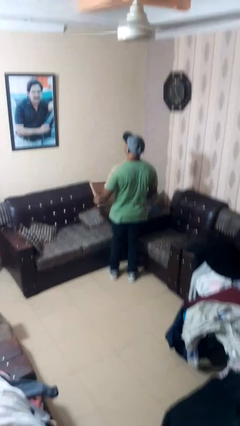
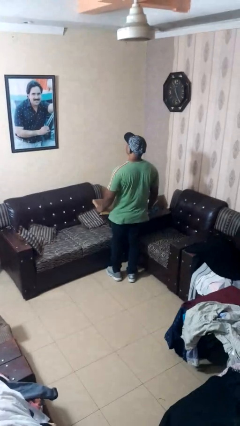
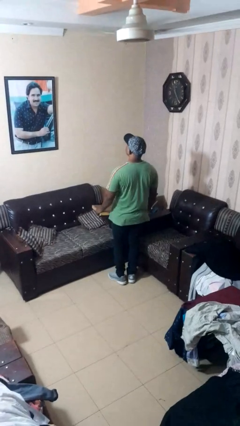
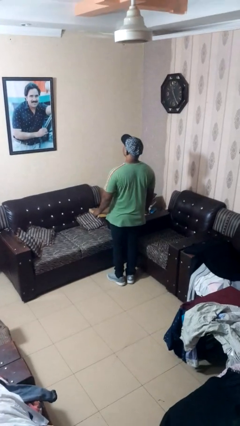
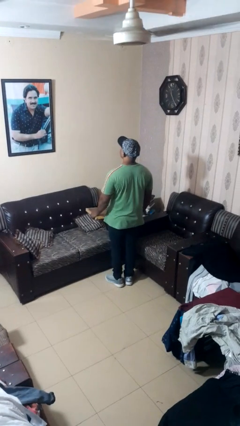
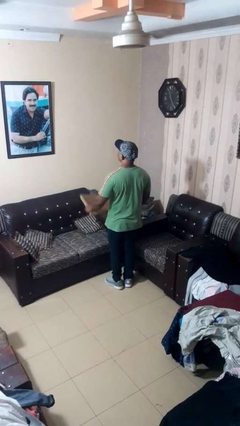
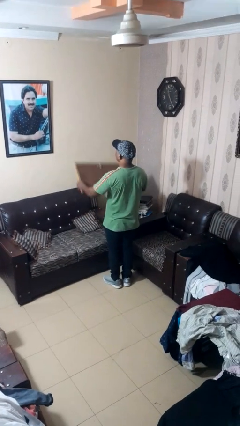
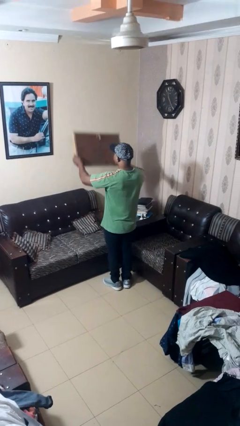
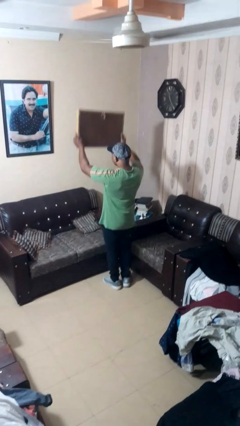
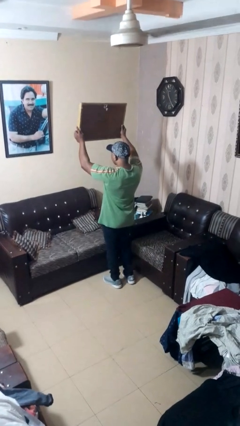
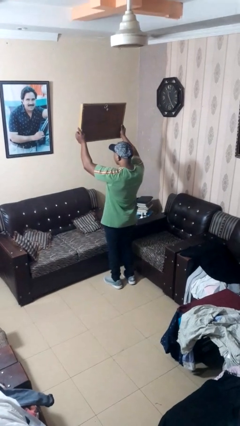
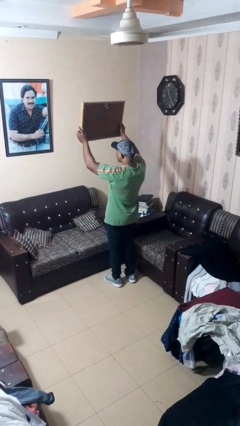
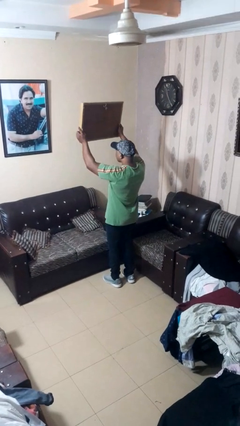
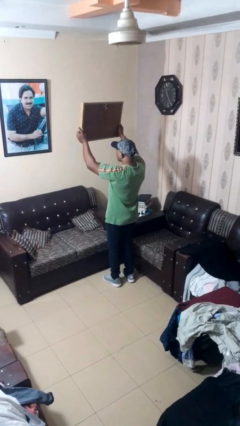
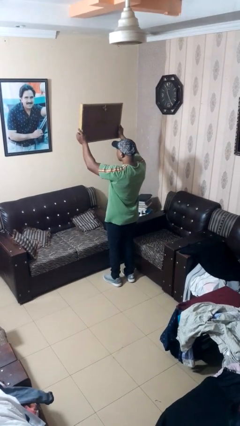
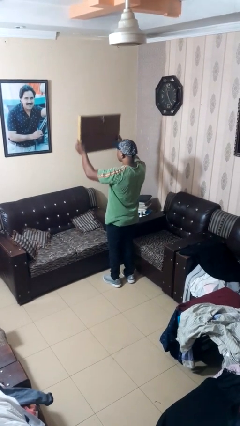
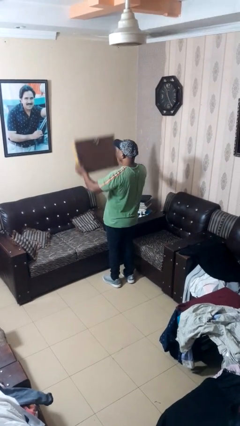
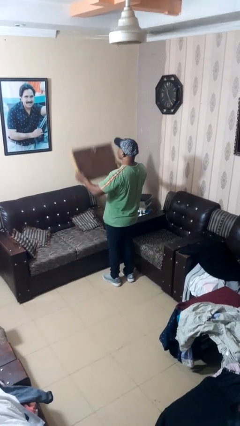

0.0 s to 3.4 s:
person holds object above head

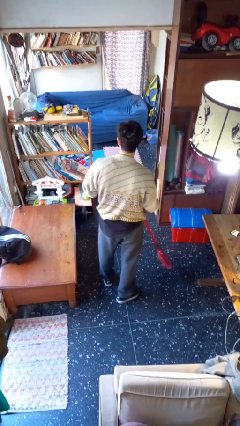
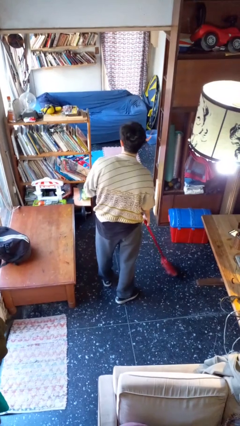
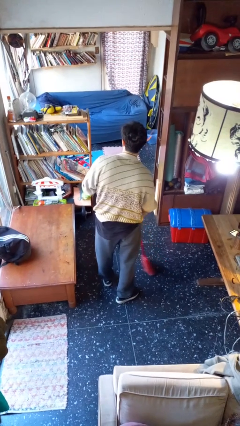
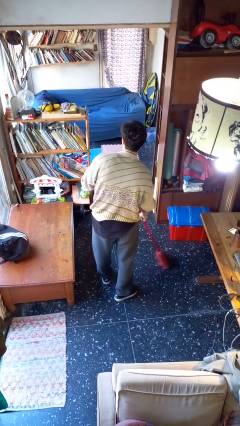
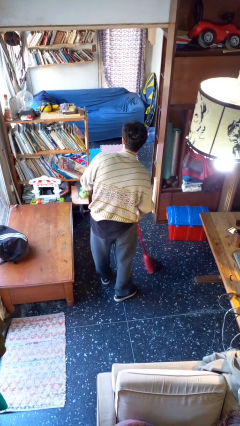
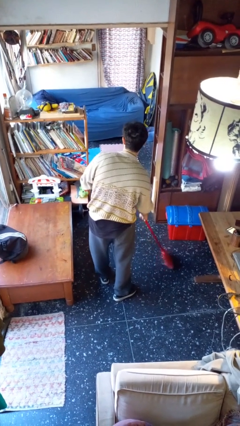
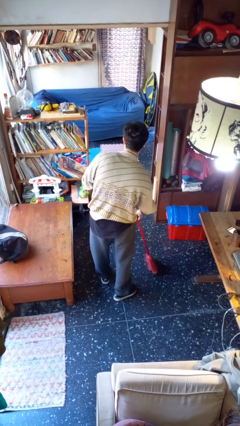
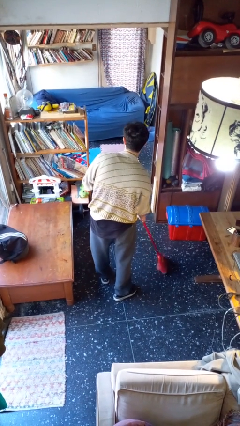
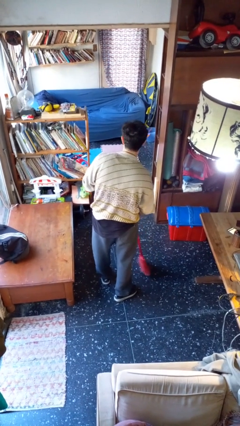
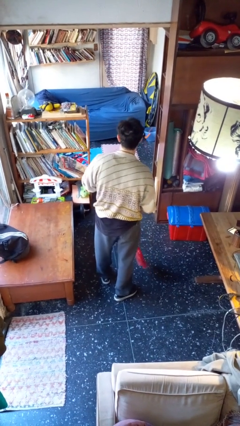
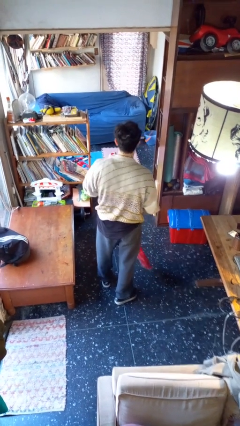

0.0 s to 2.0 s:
person sweeps floor

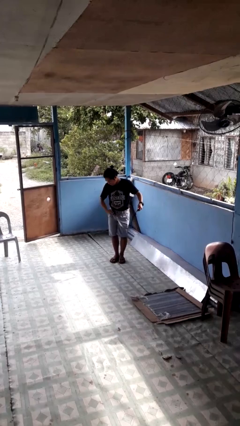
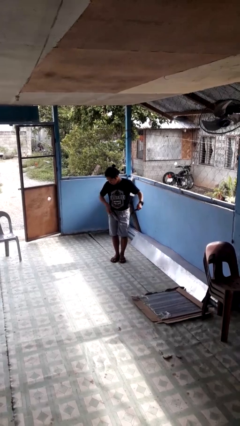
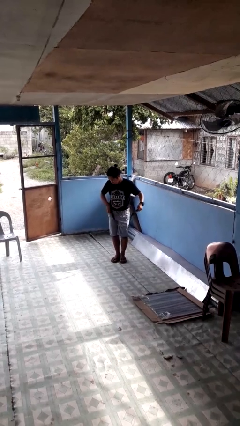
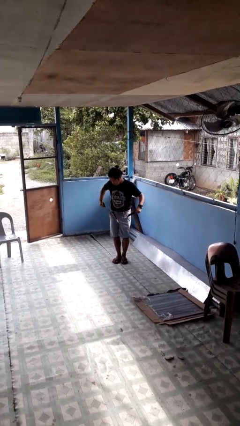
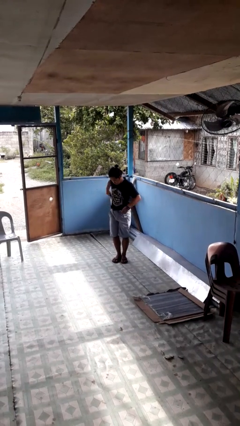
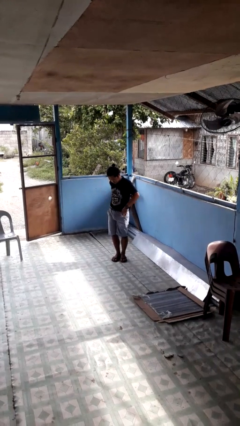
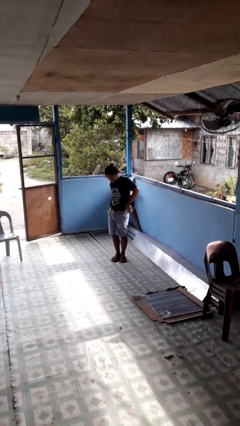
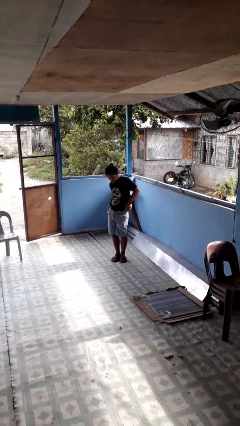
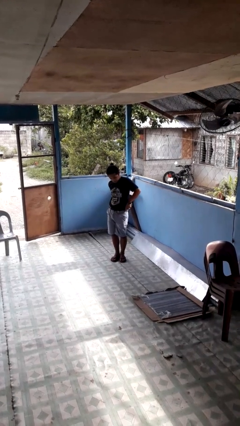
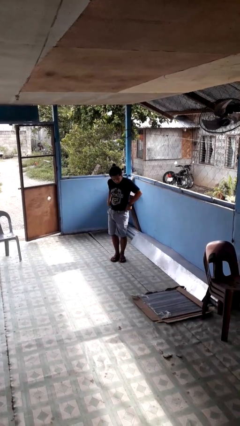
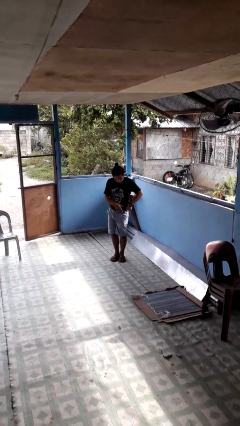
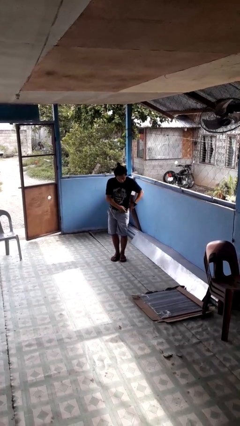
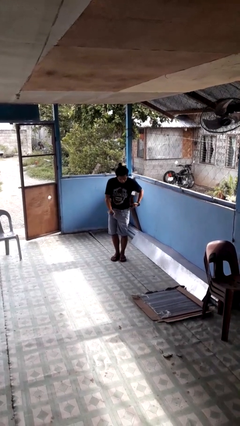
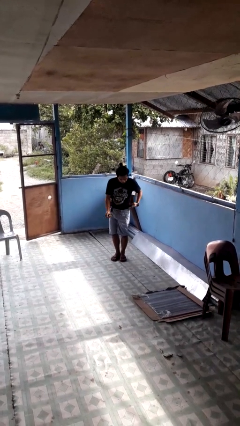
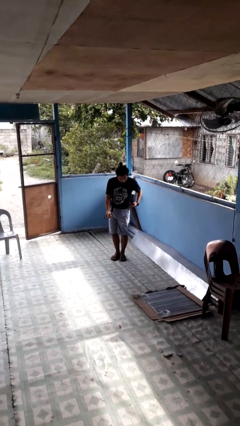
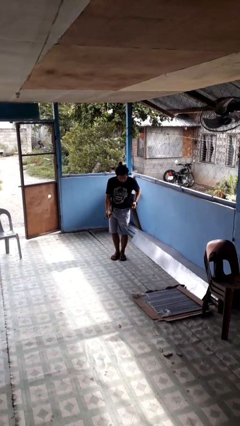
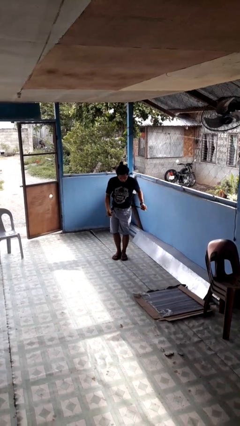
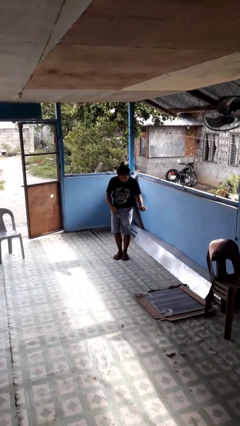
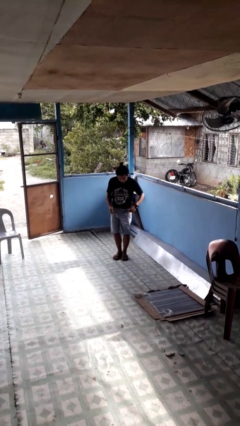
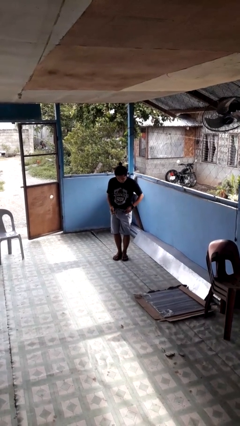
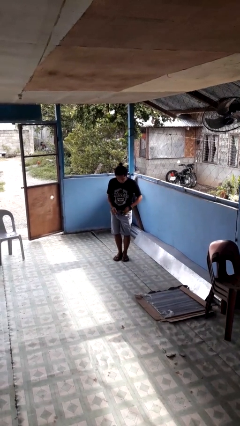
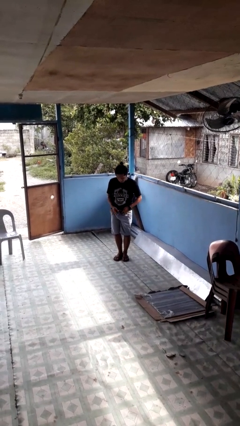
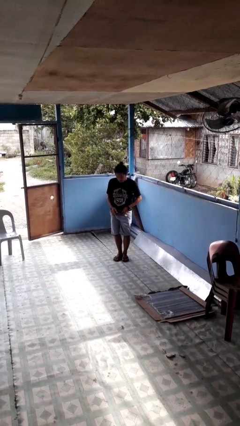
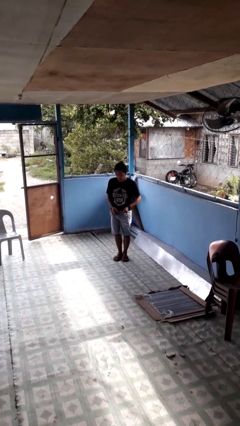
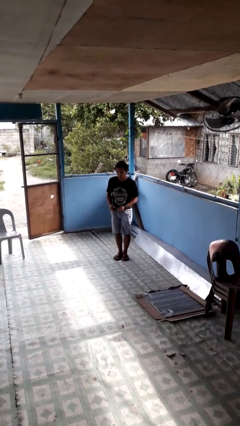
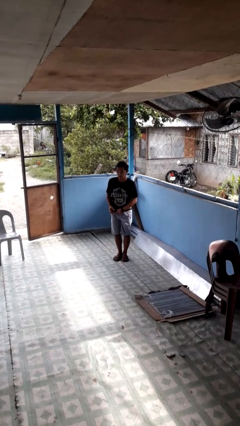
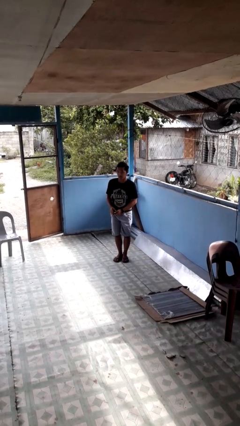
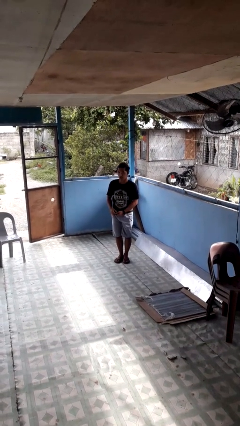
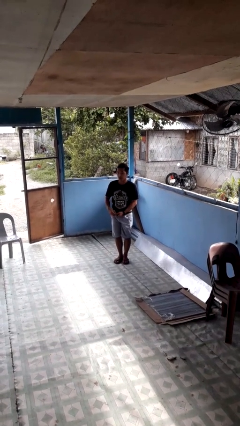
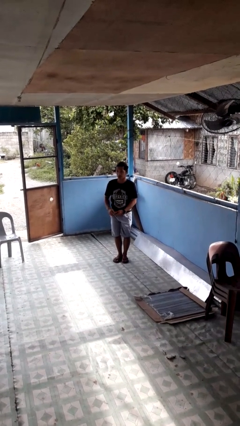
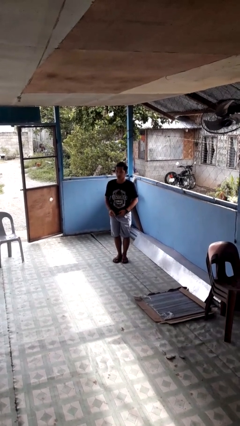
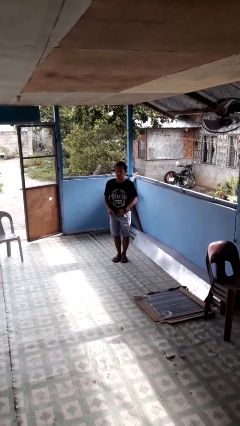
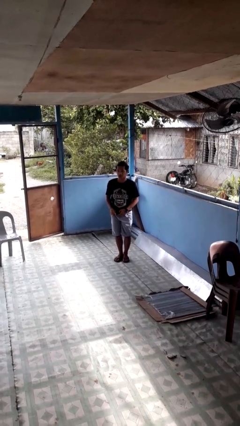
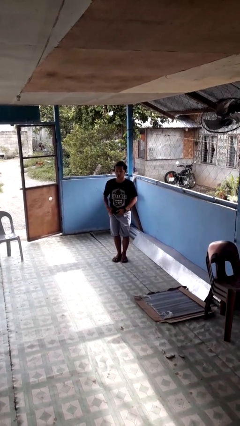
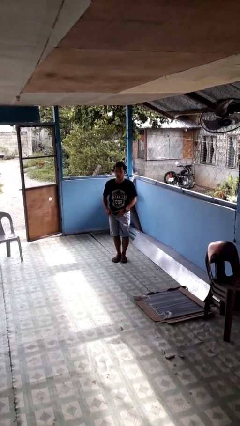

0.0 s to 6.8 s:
person puts on belt

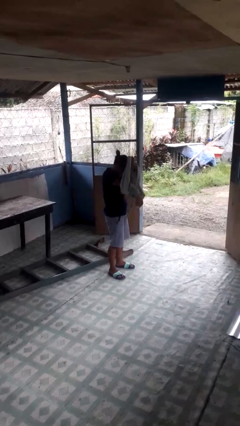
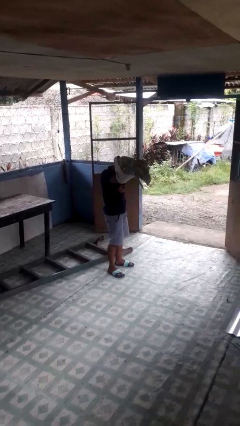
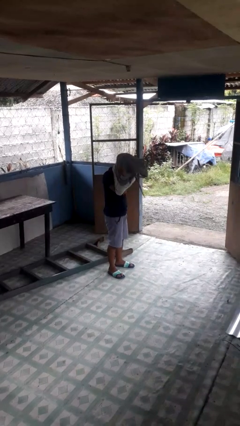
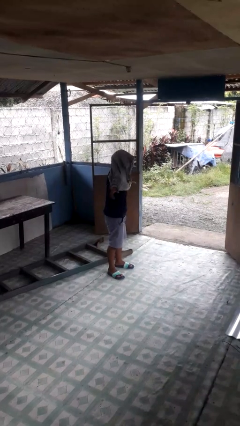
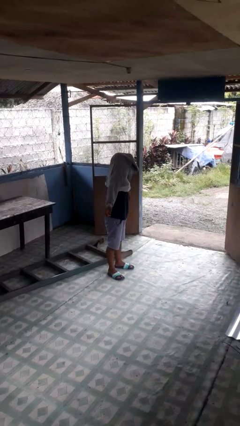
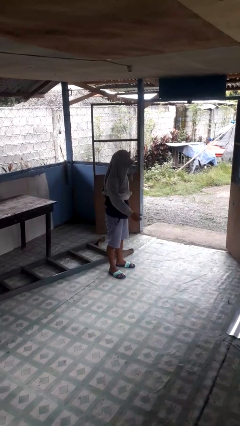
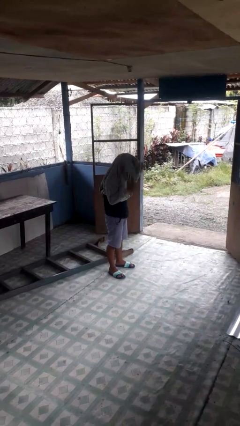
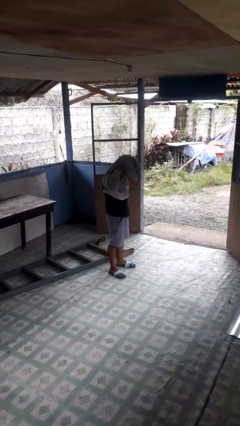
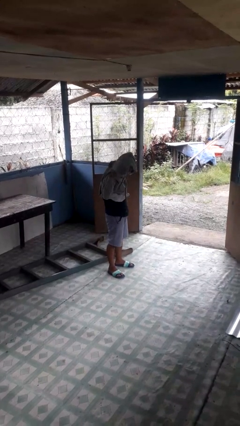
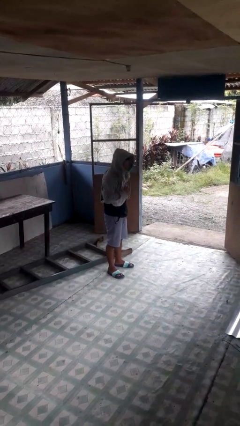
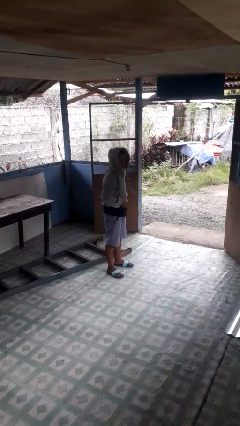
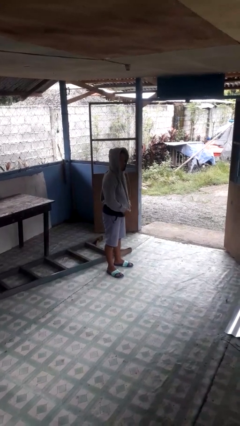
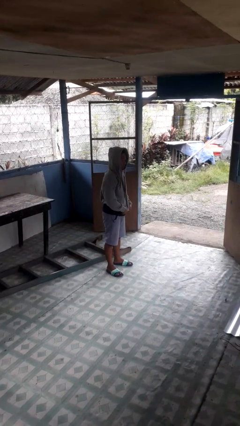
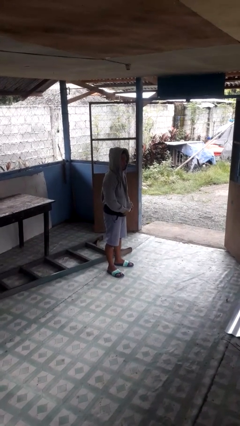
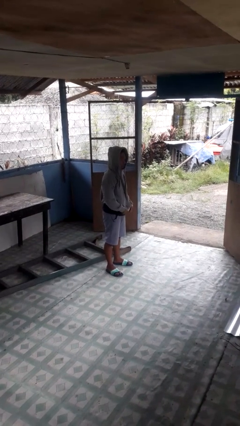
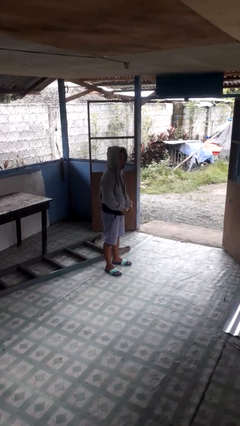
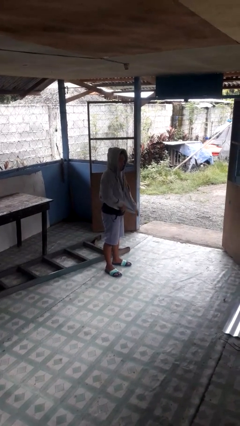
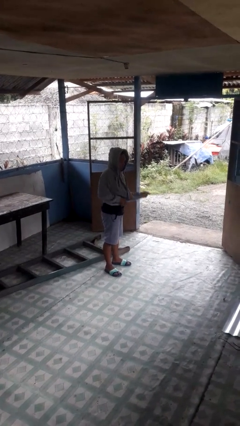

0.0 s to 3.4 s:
person puts on hoodie

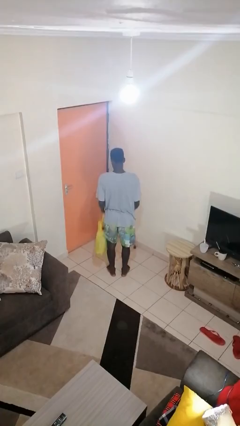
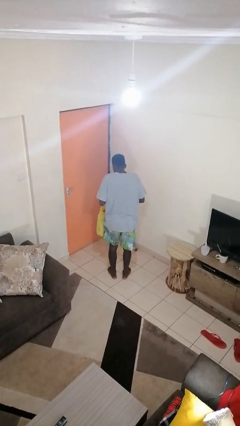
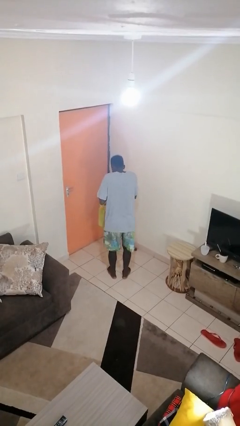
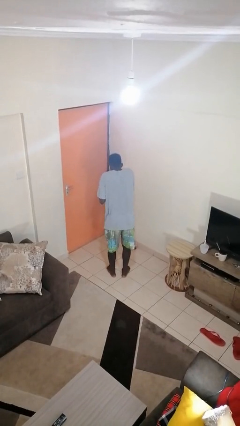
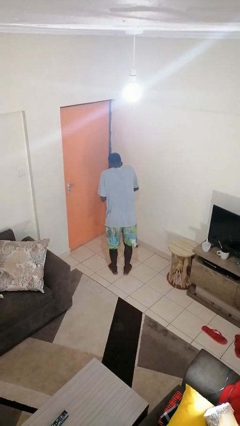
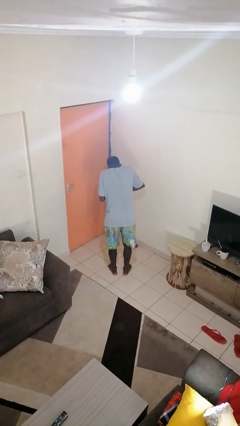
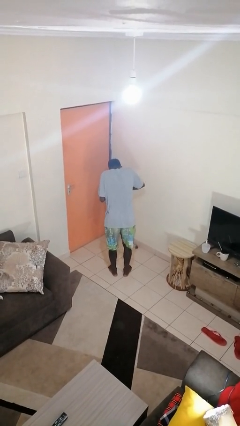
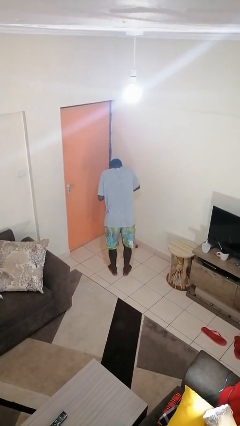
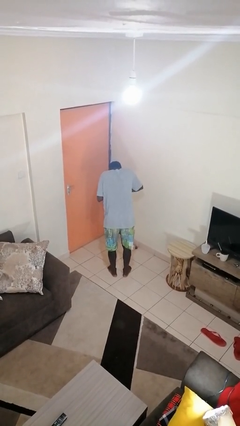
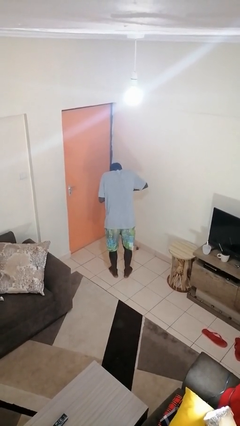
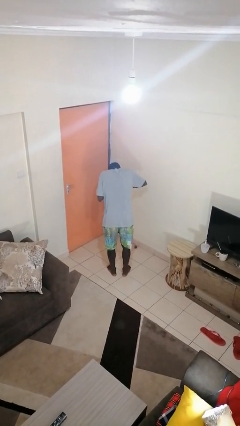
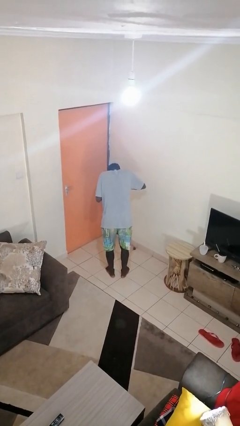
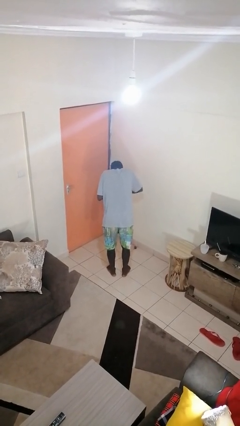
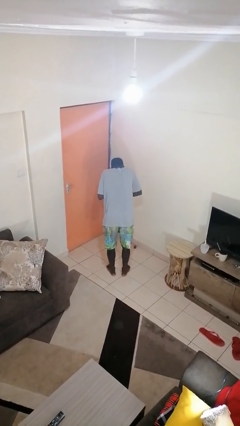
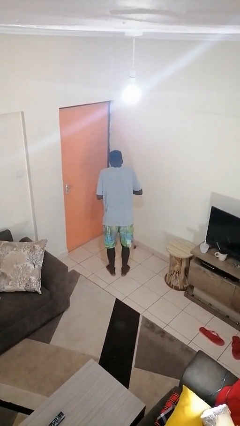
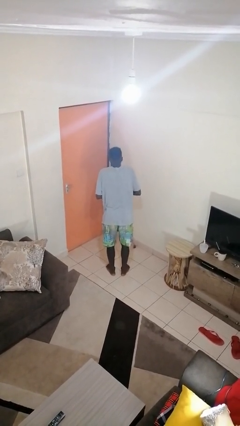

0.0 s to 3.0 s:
person searches in bag
